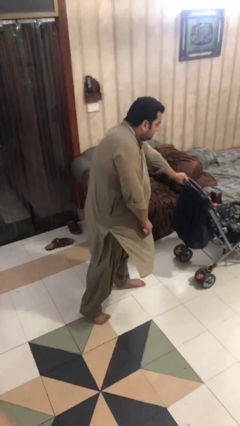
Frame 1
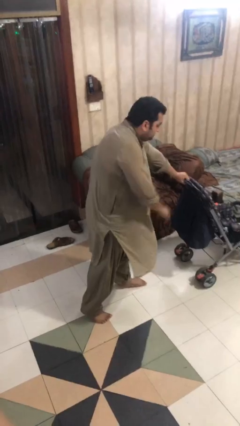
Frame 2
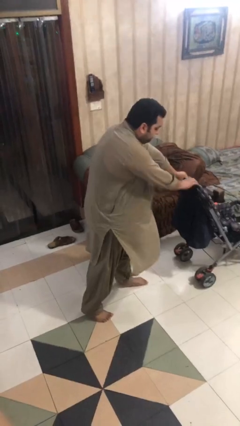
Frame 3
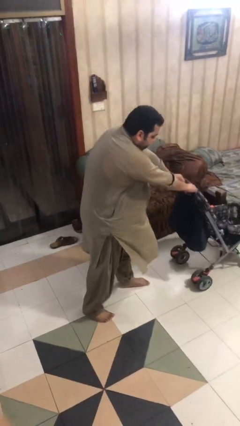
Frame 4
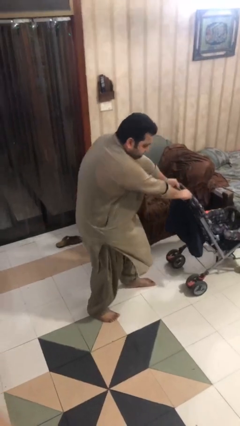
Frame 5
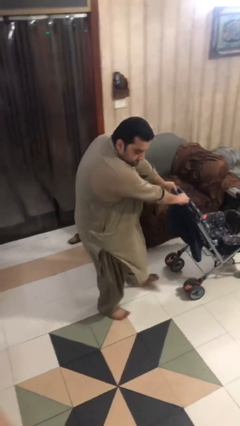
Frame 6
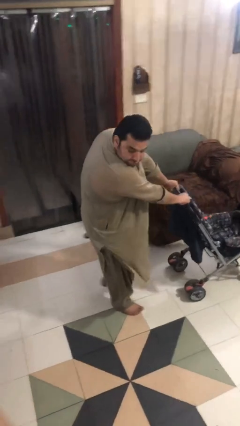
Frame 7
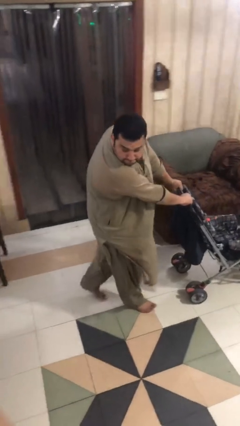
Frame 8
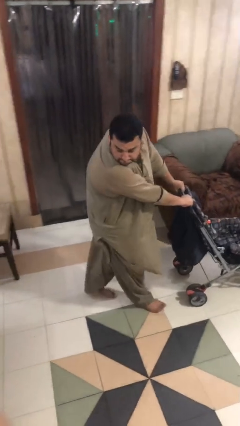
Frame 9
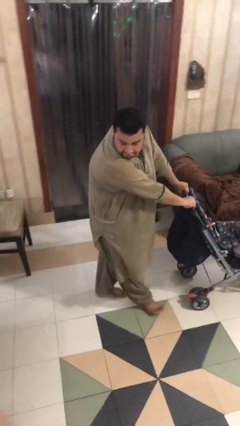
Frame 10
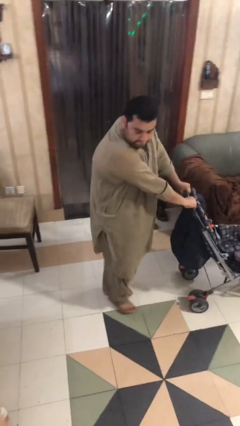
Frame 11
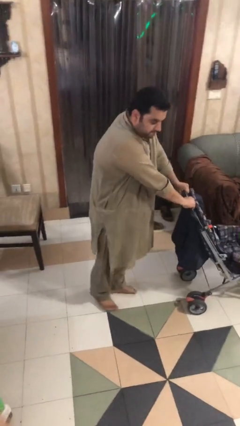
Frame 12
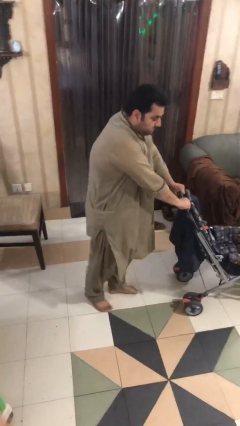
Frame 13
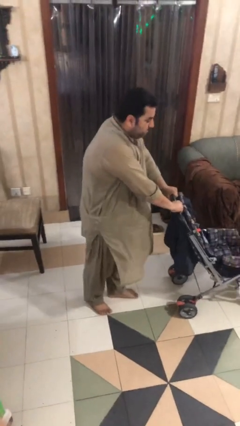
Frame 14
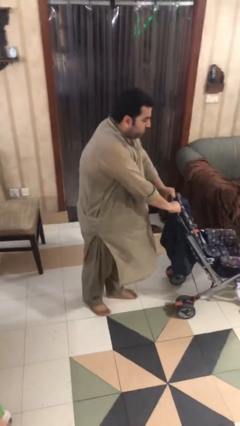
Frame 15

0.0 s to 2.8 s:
person pulls wheeled cart

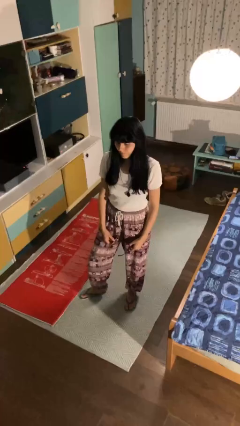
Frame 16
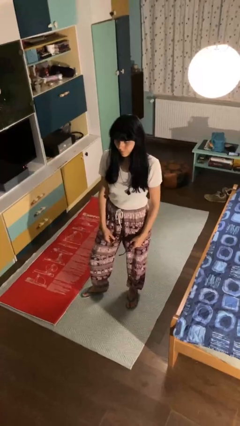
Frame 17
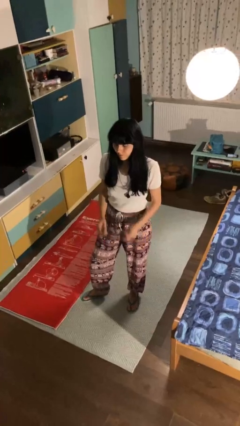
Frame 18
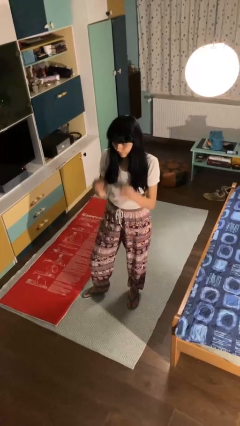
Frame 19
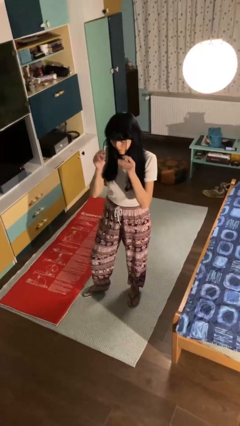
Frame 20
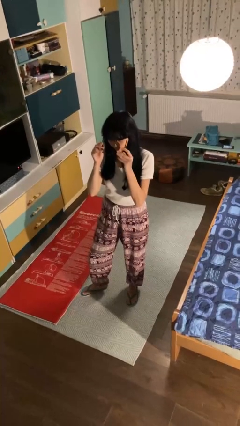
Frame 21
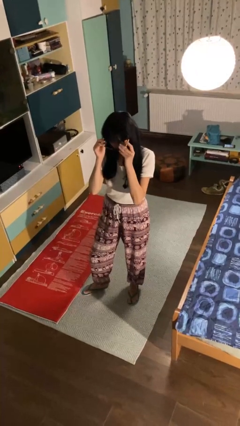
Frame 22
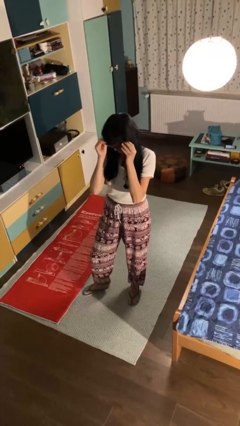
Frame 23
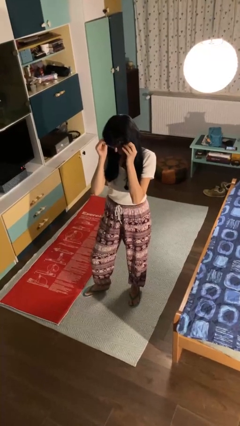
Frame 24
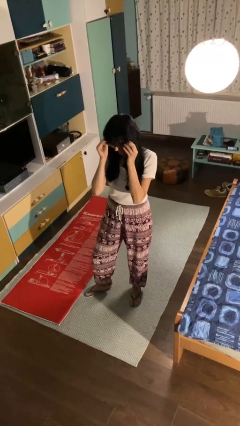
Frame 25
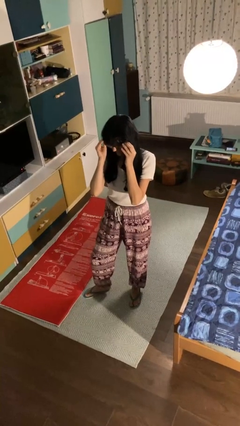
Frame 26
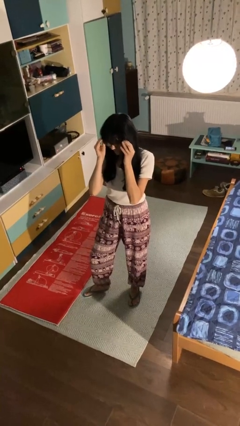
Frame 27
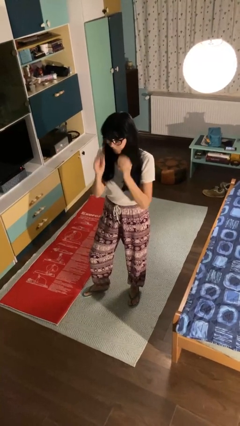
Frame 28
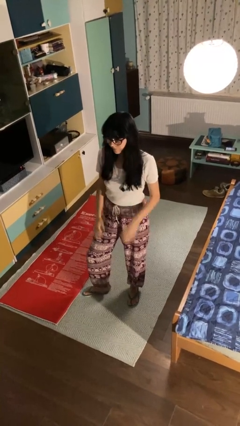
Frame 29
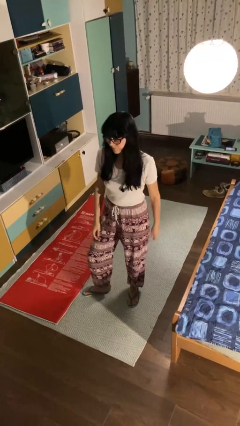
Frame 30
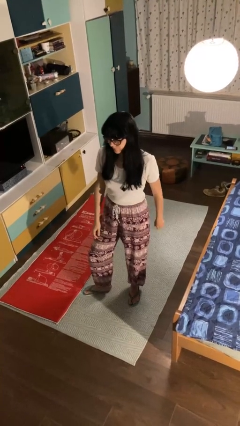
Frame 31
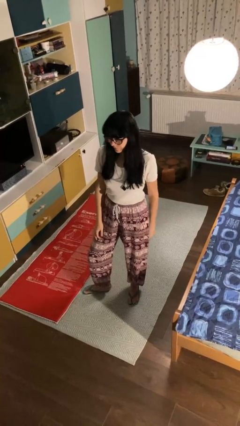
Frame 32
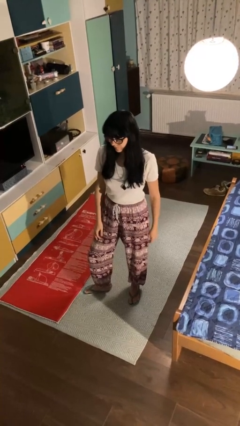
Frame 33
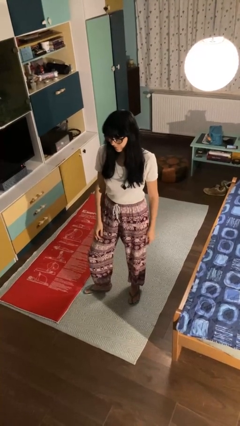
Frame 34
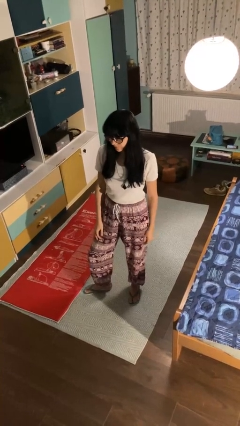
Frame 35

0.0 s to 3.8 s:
person puts on glasses

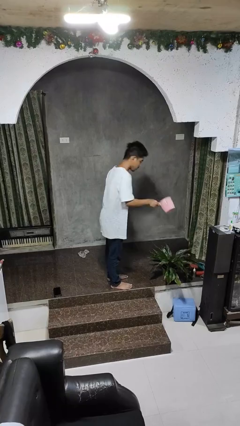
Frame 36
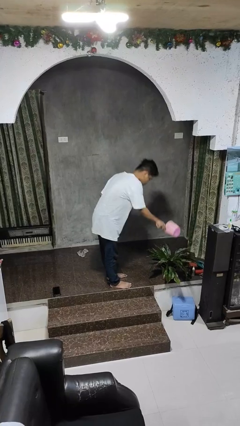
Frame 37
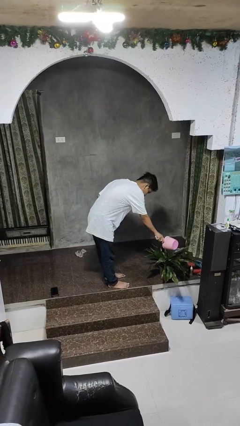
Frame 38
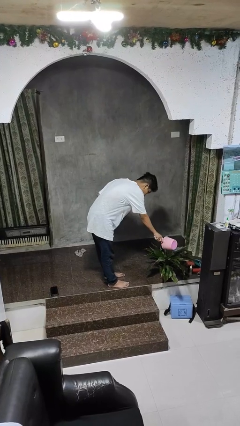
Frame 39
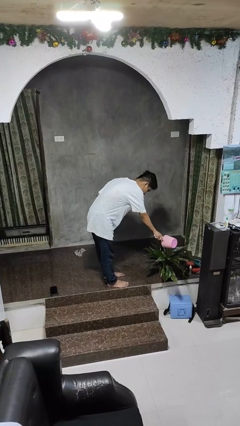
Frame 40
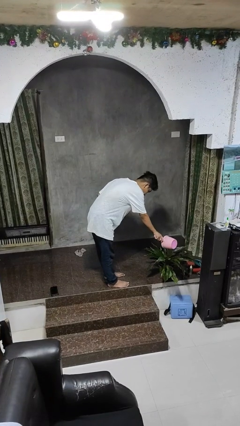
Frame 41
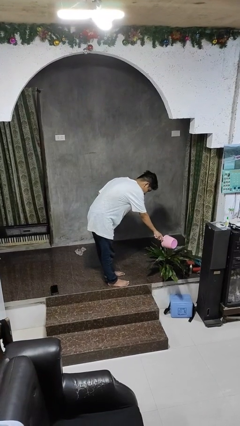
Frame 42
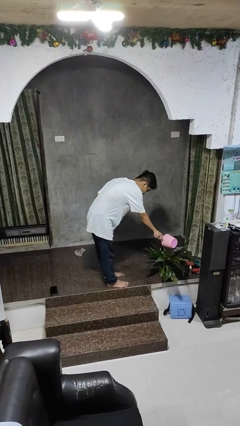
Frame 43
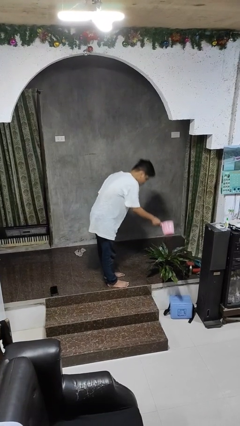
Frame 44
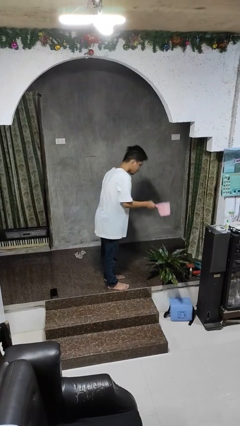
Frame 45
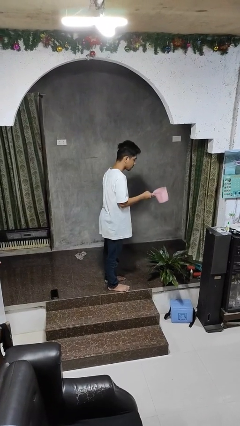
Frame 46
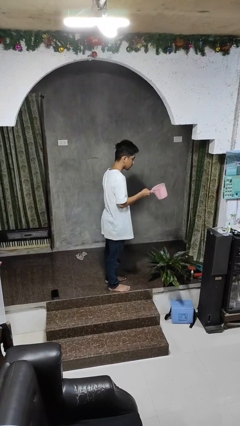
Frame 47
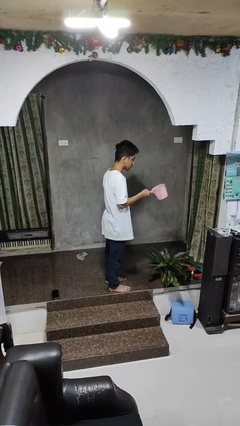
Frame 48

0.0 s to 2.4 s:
person waters houseplant

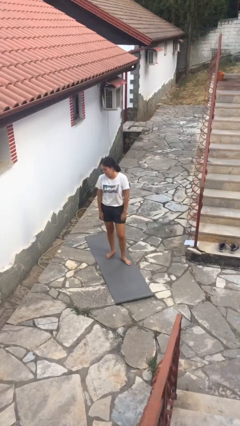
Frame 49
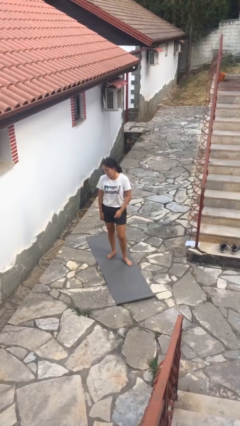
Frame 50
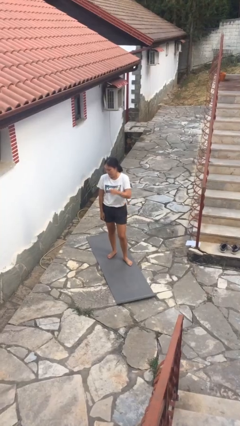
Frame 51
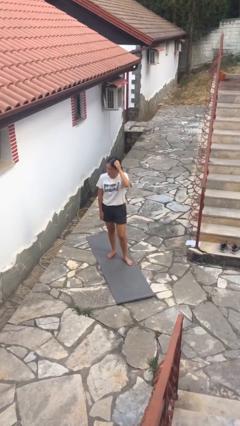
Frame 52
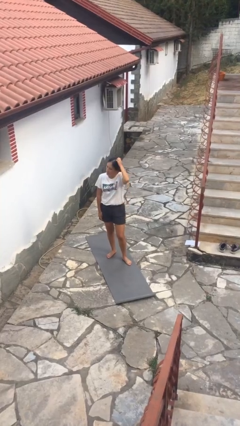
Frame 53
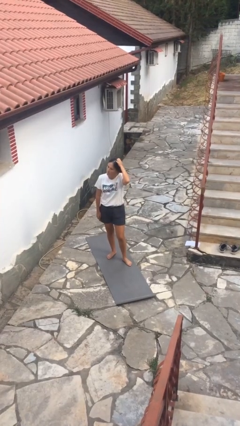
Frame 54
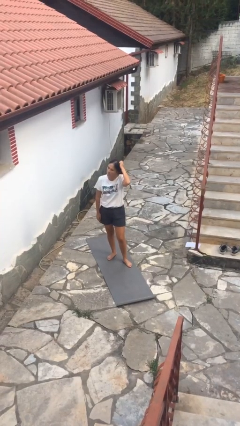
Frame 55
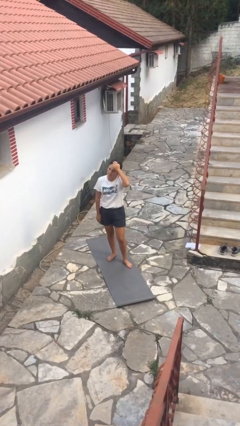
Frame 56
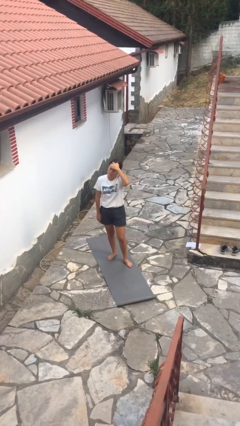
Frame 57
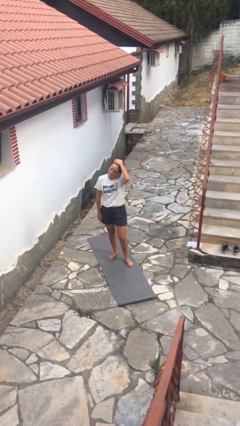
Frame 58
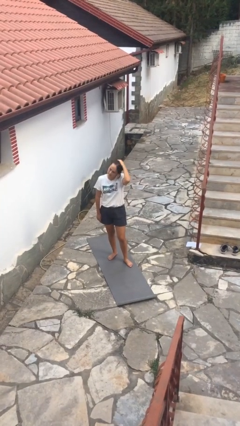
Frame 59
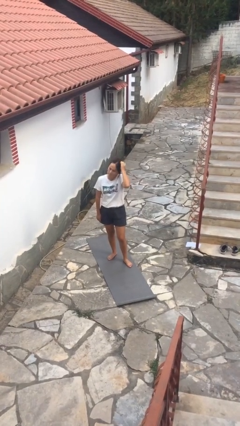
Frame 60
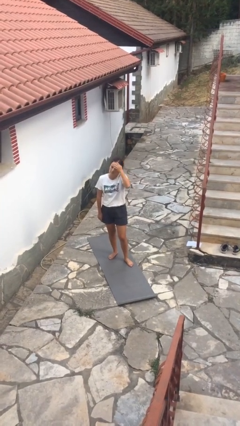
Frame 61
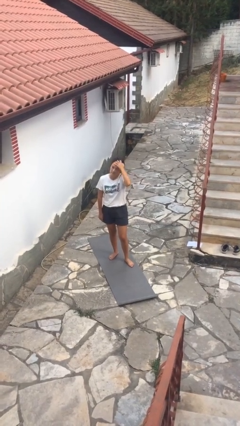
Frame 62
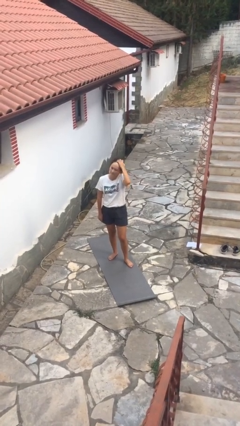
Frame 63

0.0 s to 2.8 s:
person scratches face

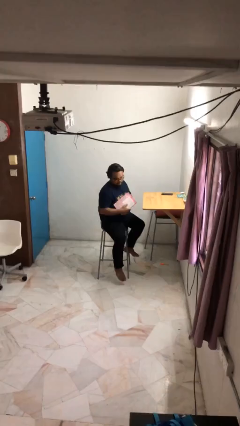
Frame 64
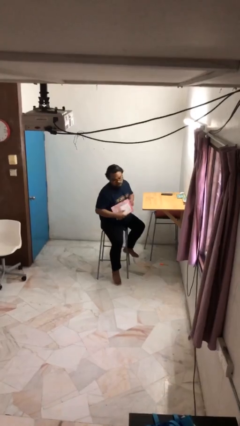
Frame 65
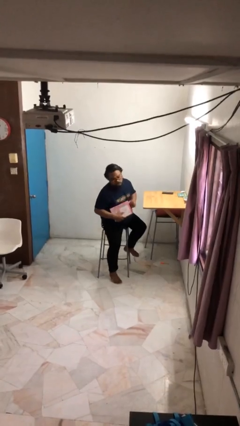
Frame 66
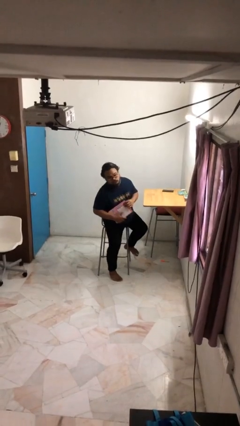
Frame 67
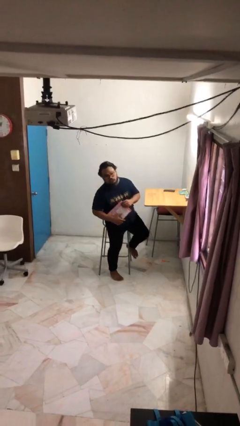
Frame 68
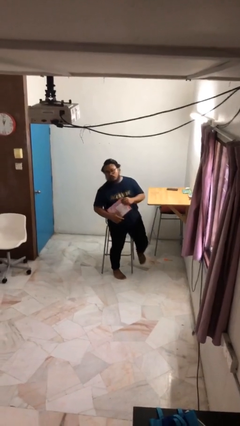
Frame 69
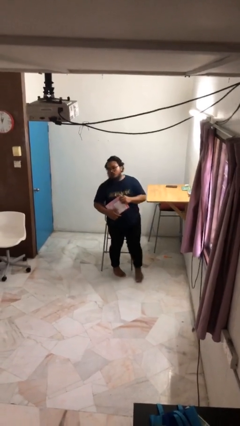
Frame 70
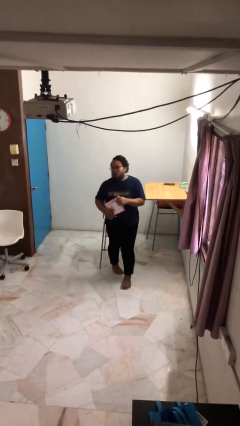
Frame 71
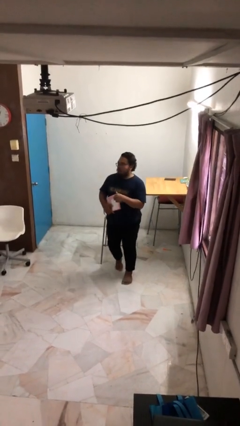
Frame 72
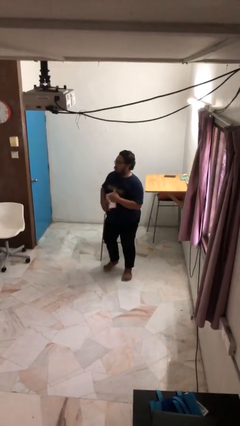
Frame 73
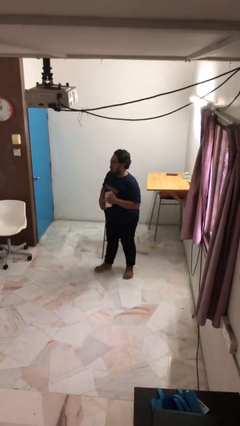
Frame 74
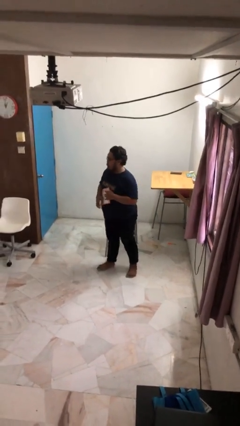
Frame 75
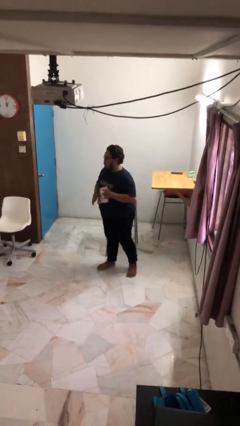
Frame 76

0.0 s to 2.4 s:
person stands up

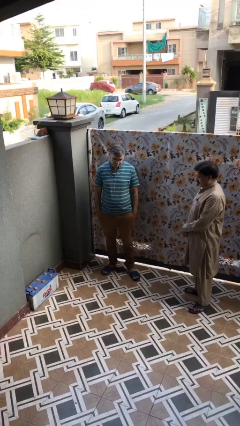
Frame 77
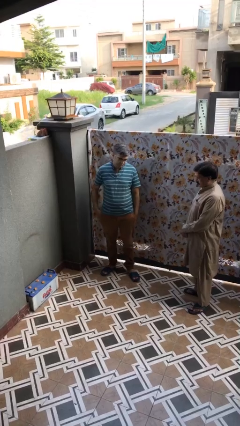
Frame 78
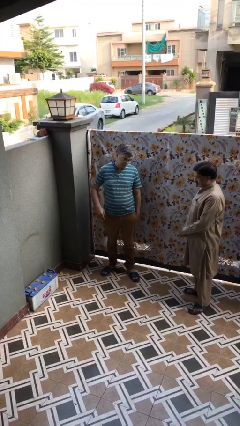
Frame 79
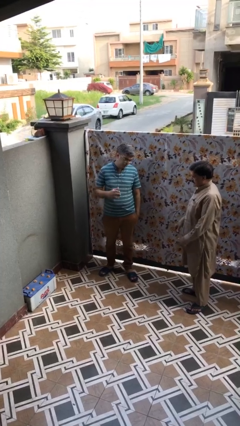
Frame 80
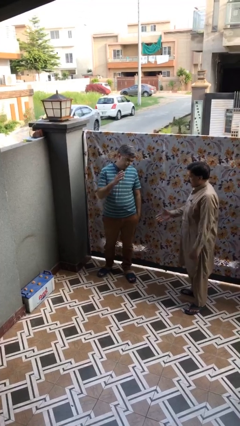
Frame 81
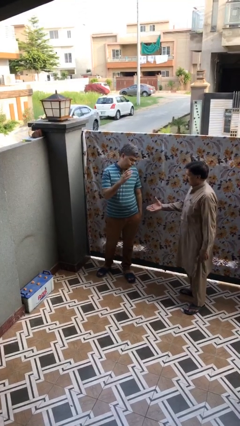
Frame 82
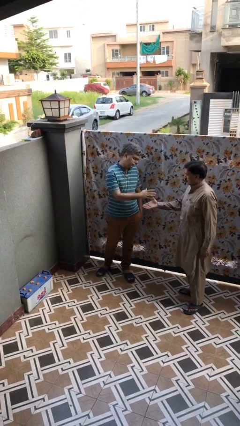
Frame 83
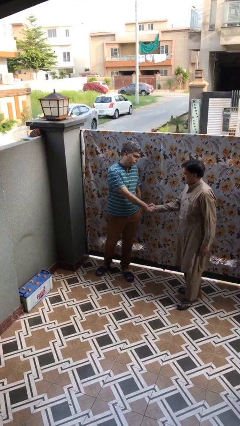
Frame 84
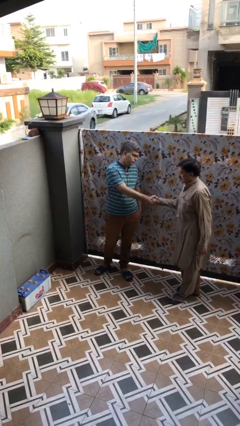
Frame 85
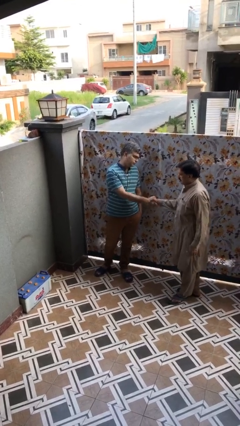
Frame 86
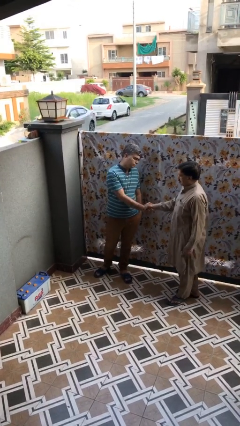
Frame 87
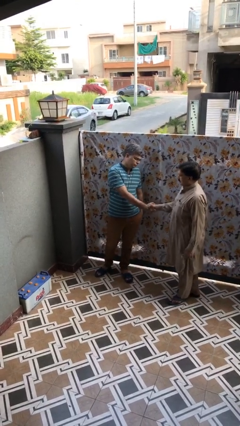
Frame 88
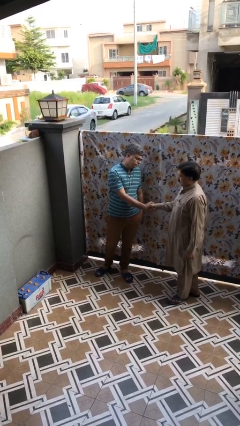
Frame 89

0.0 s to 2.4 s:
person shakes hand

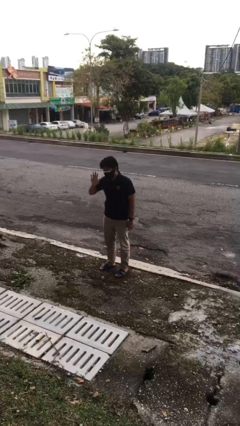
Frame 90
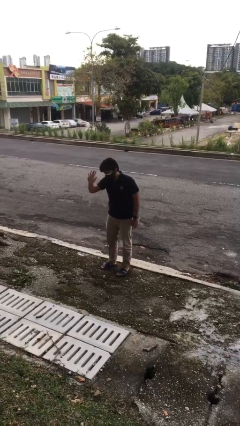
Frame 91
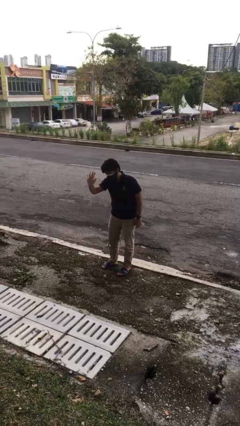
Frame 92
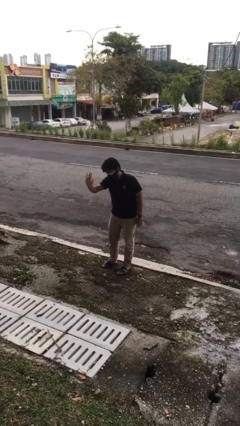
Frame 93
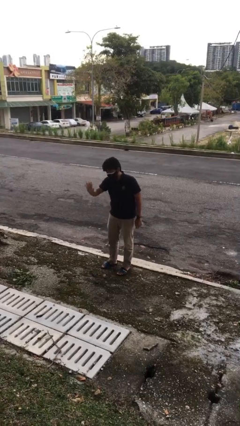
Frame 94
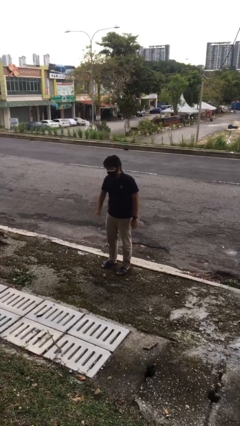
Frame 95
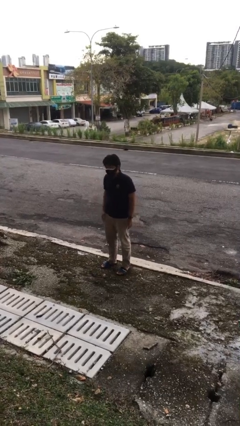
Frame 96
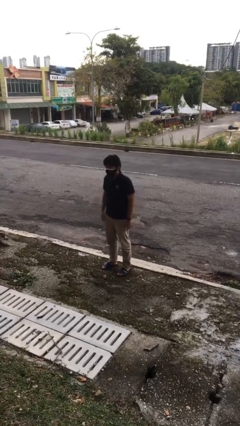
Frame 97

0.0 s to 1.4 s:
person gestures stop
